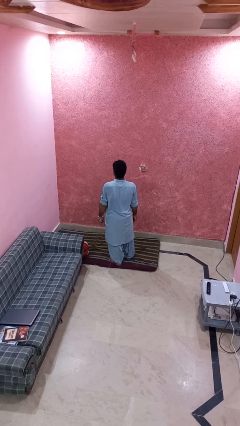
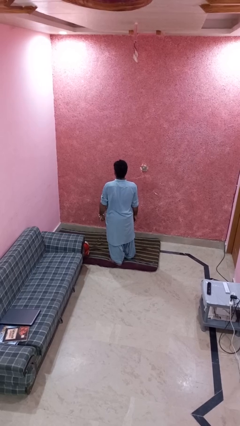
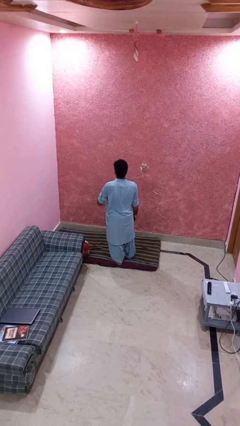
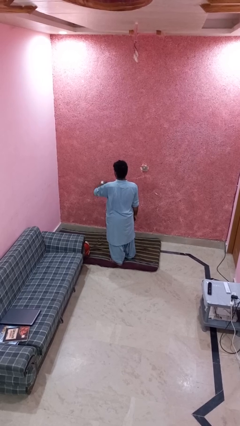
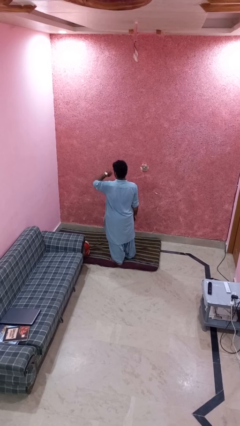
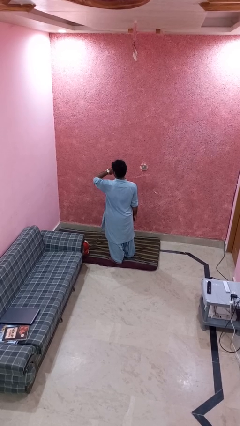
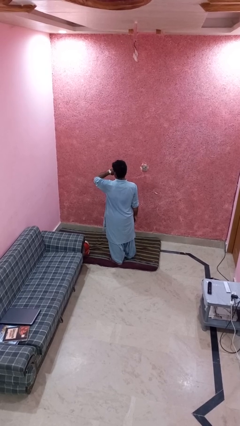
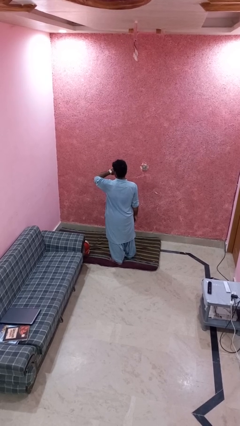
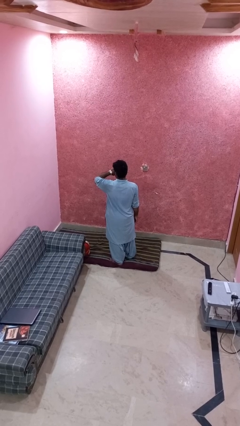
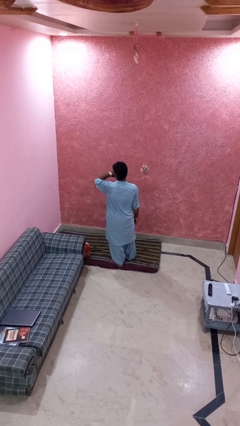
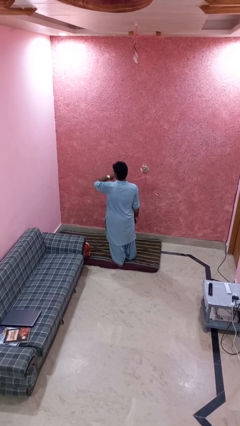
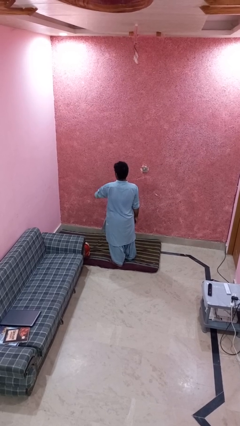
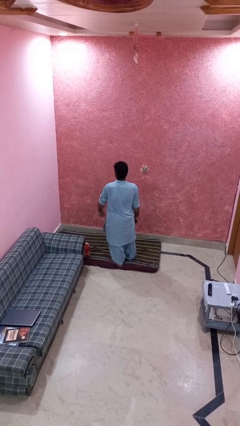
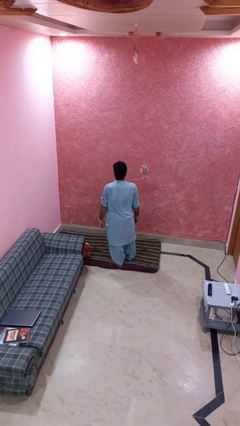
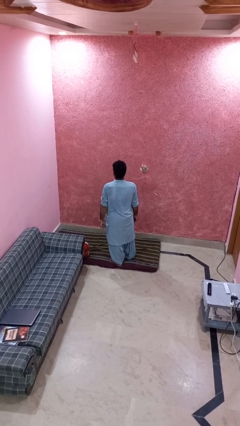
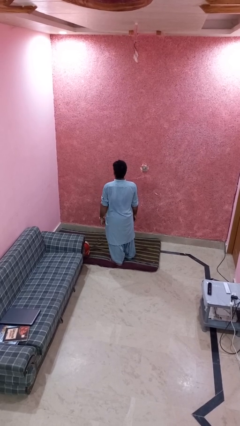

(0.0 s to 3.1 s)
person looks at wristwatch

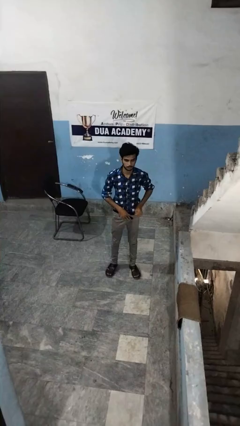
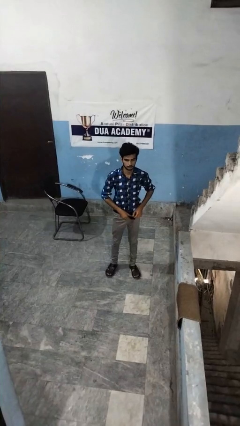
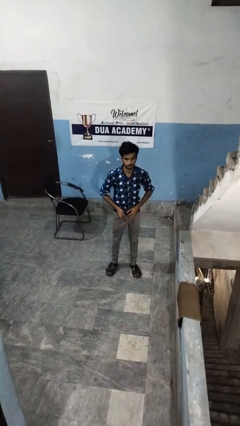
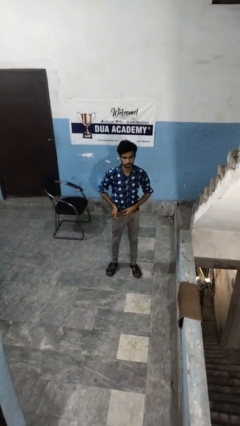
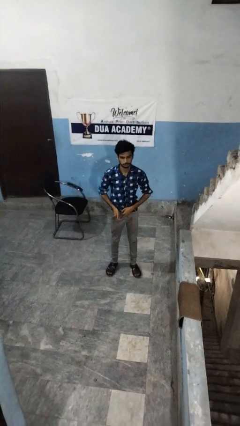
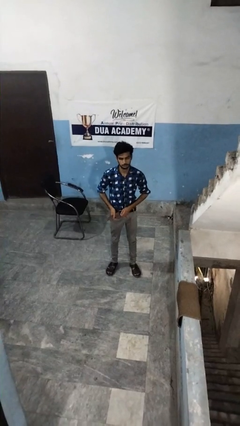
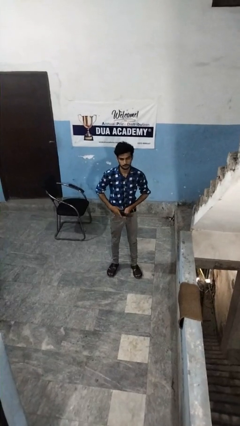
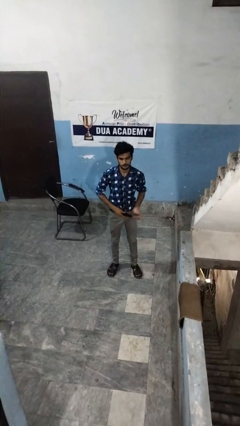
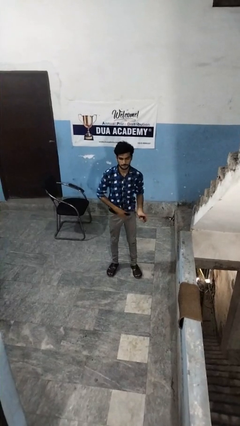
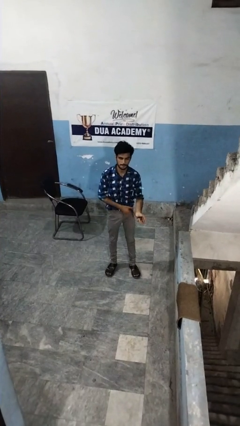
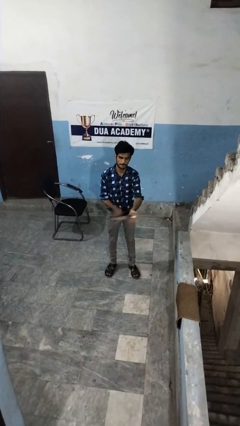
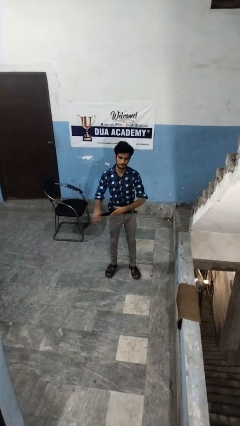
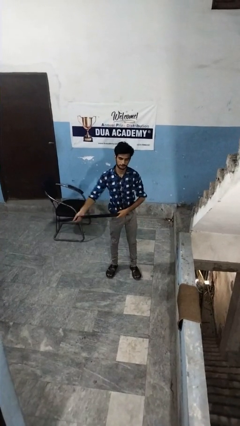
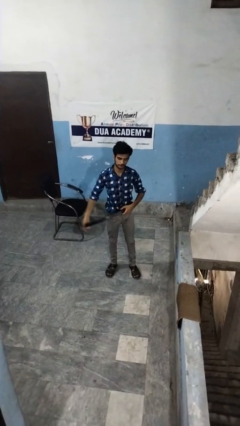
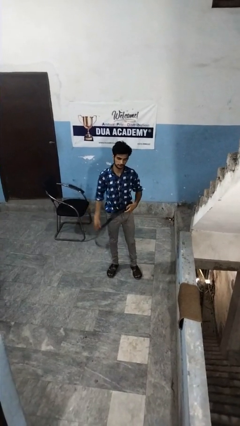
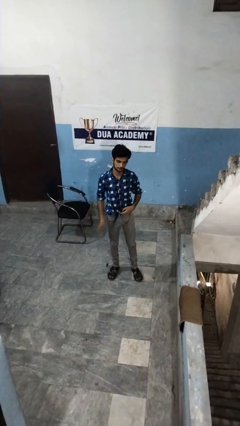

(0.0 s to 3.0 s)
person takes off belt

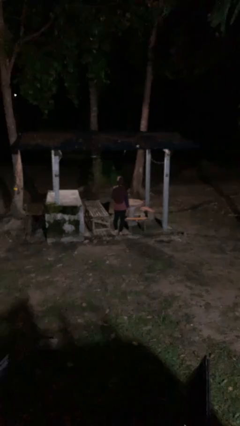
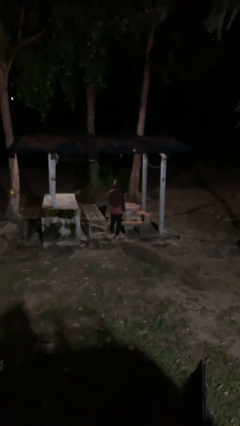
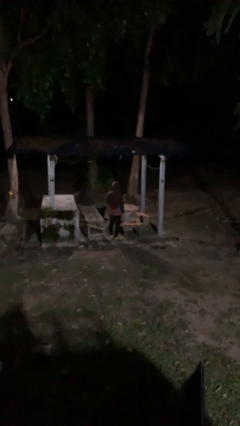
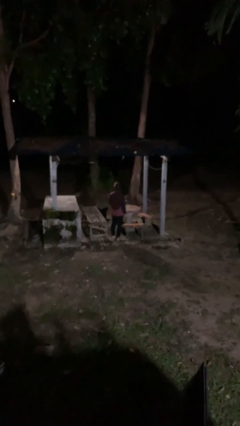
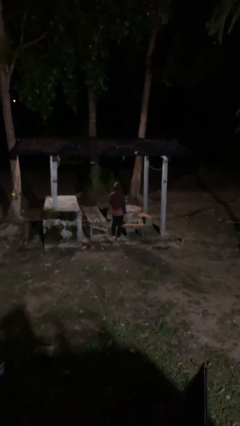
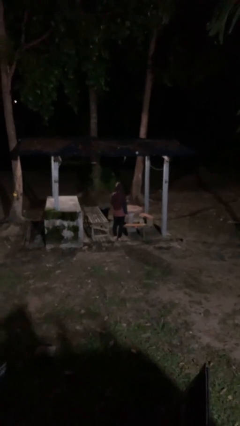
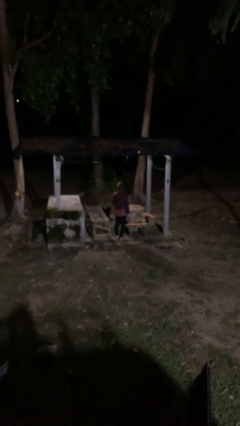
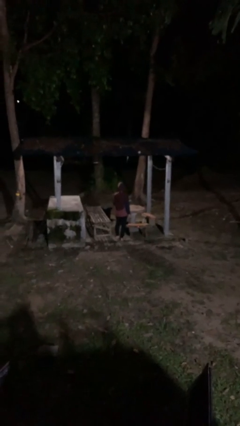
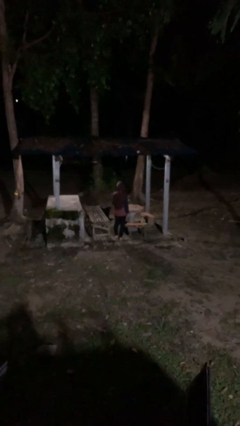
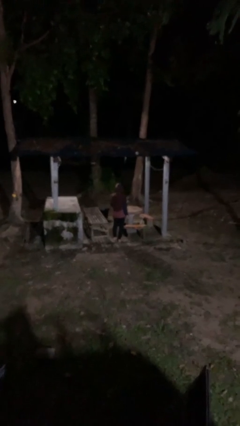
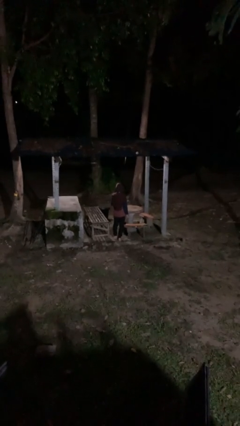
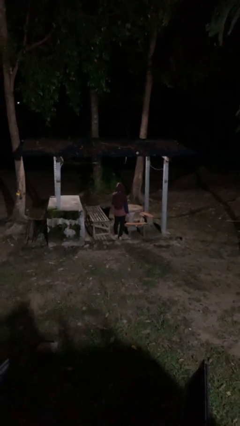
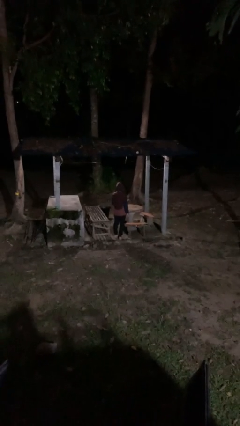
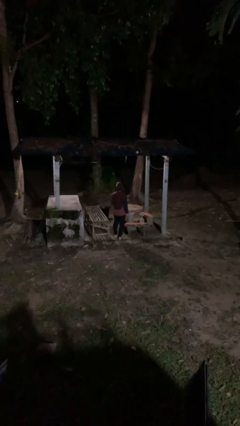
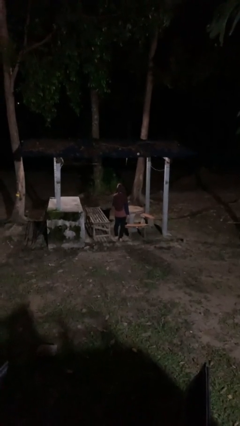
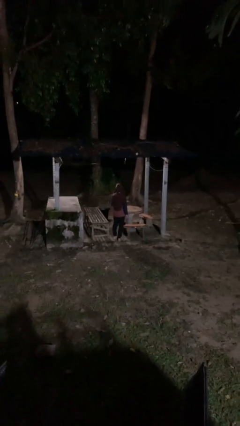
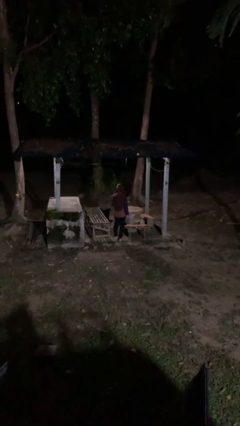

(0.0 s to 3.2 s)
person gestures be quiet

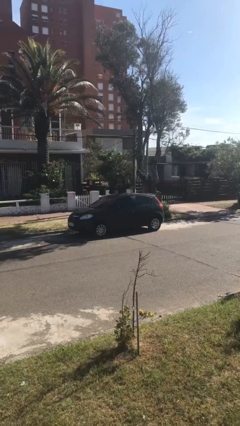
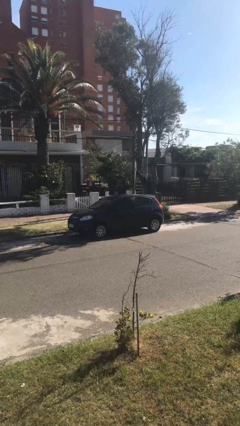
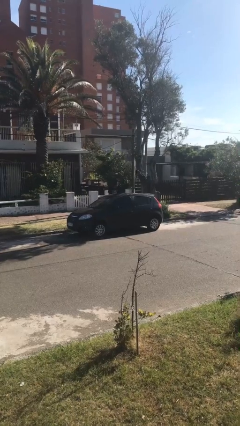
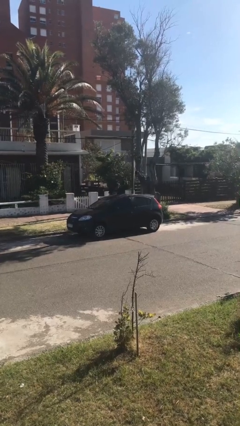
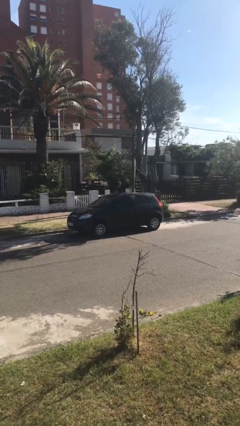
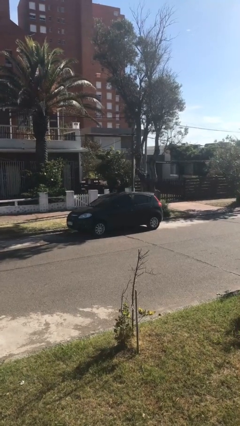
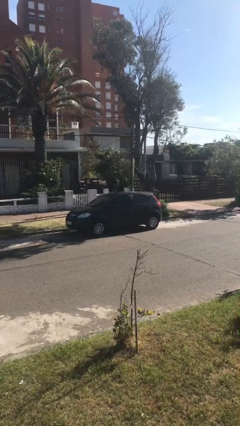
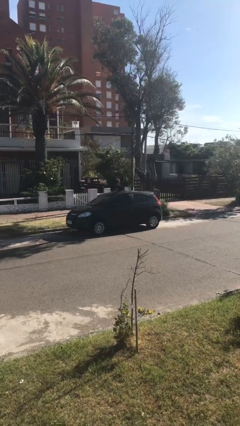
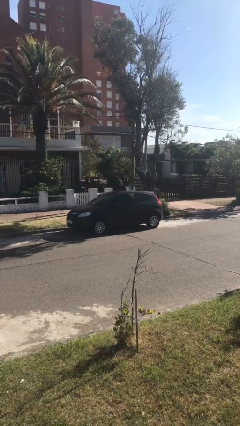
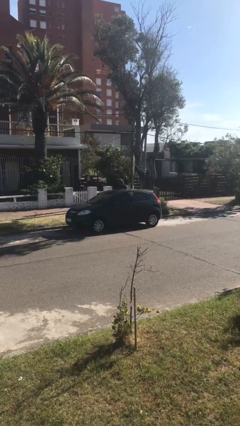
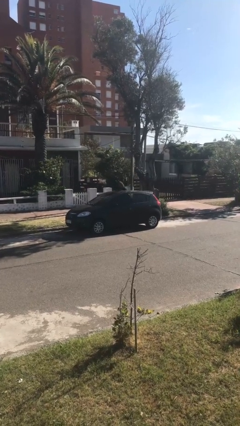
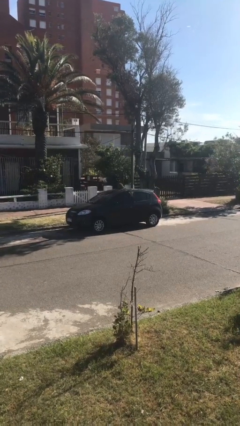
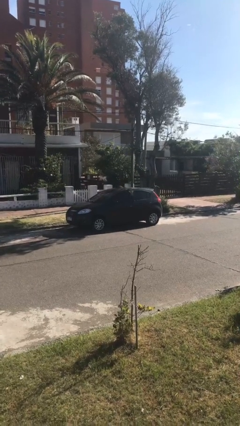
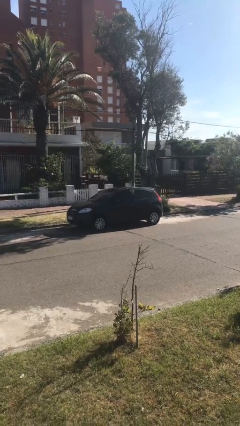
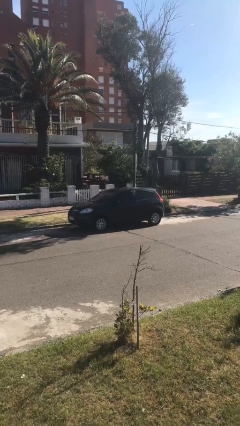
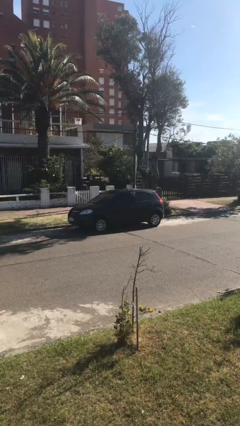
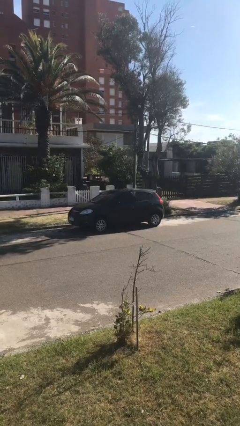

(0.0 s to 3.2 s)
car picks up person

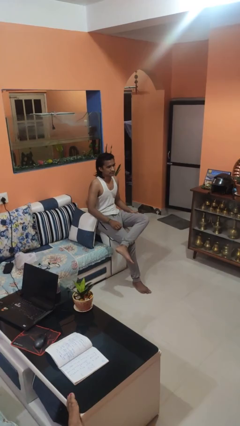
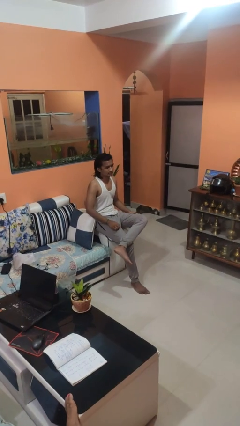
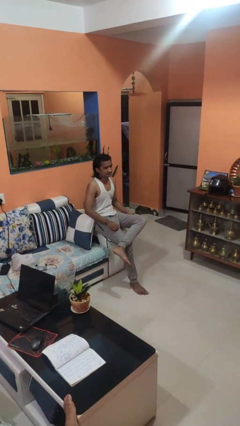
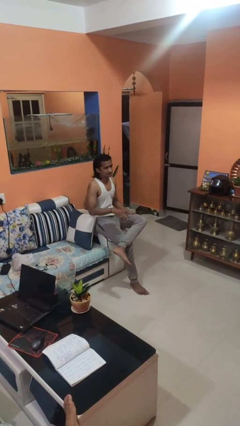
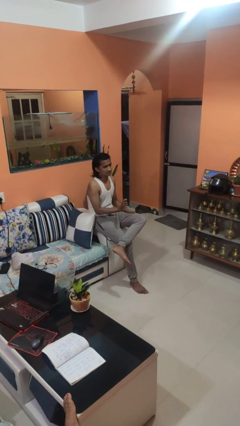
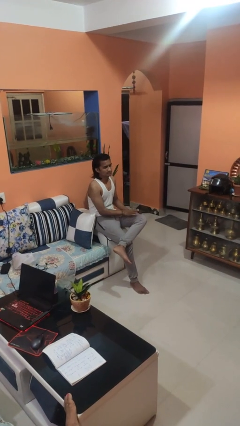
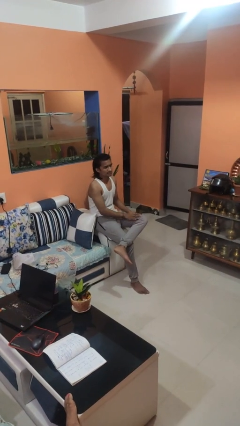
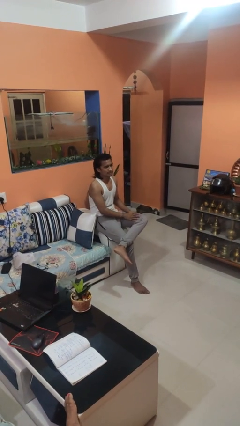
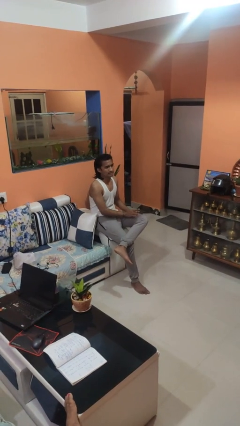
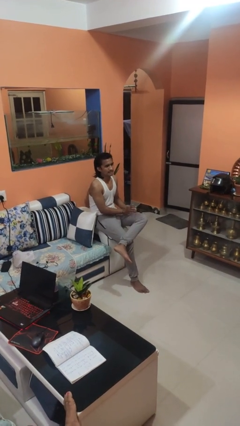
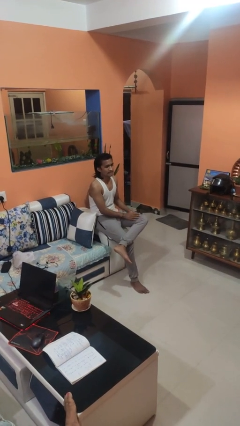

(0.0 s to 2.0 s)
person slaps hands on thighs

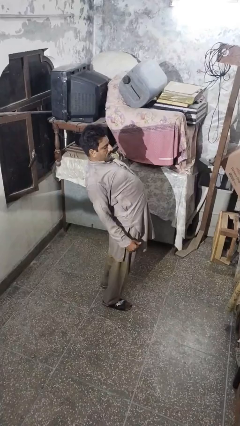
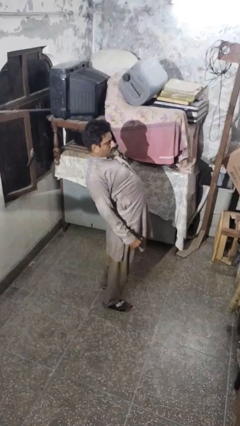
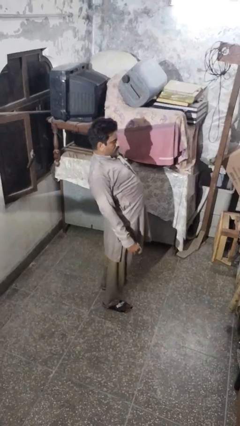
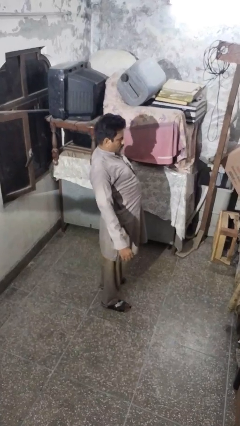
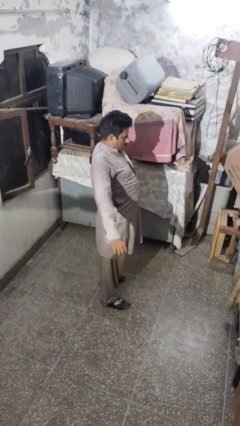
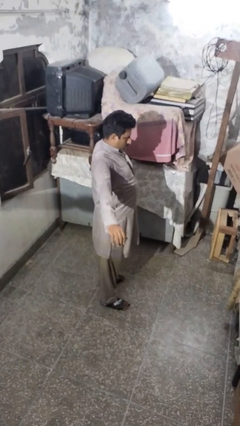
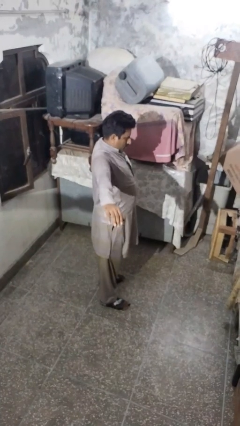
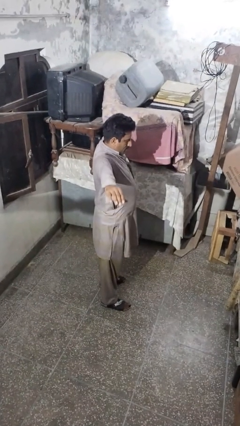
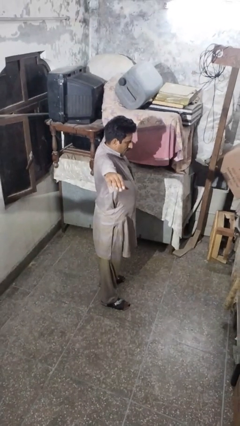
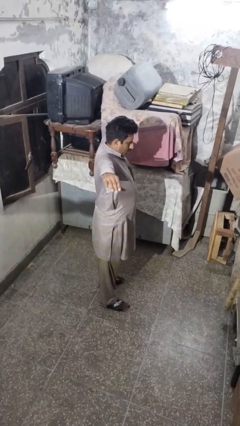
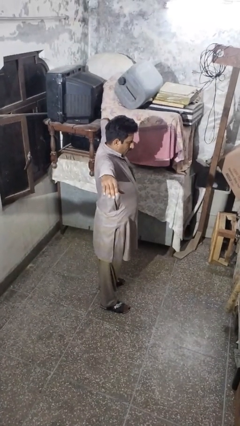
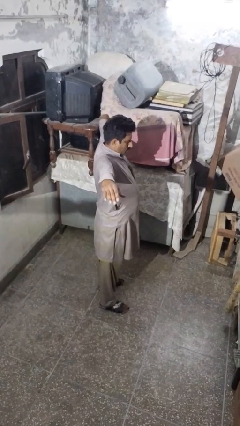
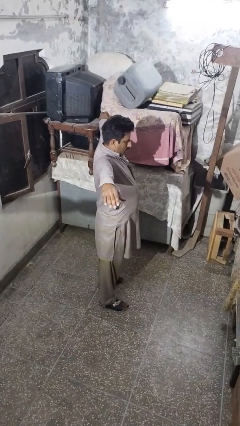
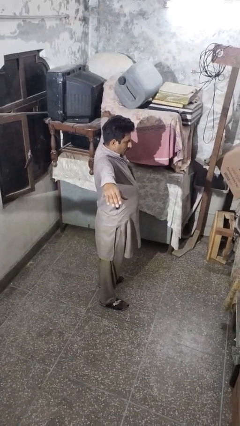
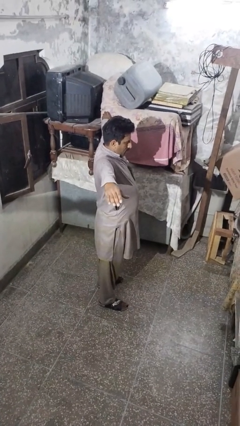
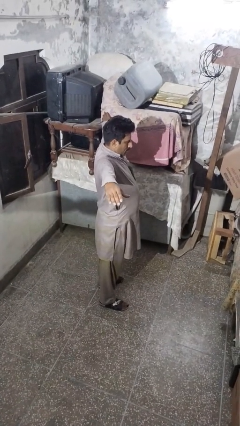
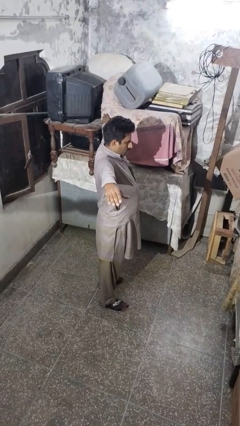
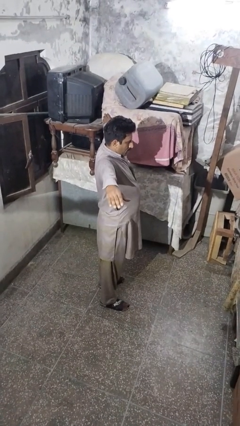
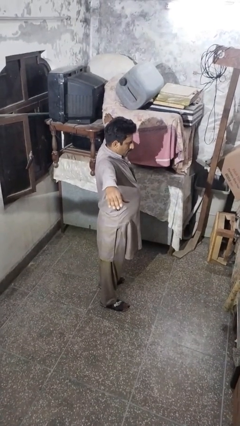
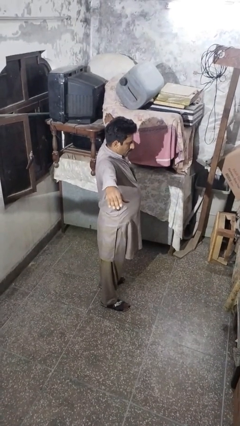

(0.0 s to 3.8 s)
person stretches arms to side
